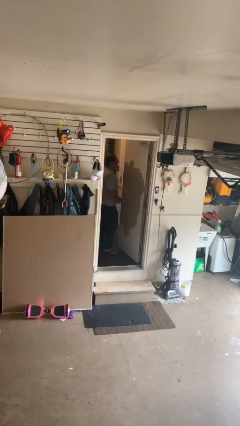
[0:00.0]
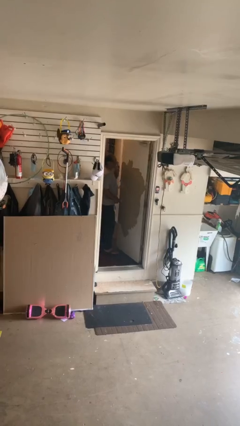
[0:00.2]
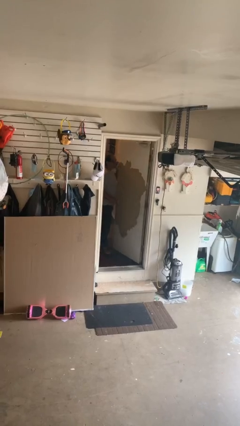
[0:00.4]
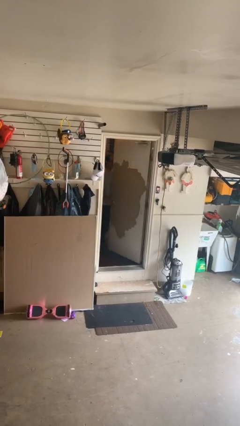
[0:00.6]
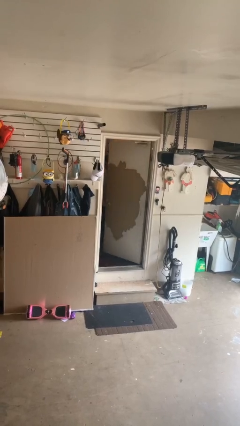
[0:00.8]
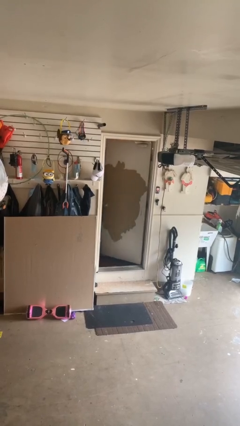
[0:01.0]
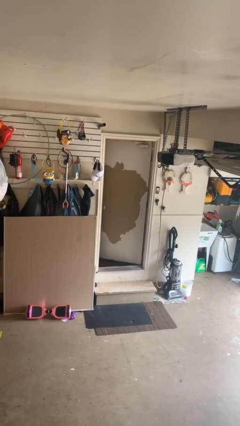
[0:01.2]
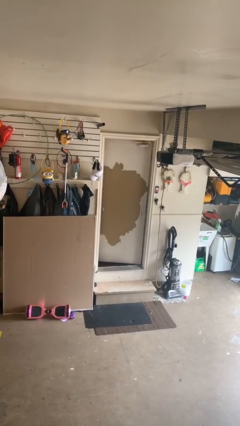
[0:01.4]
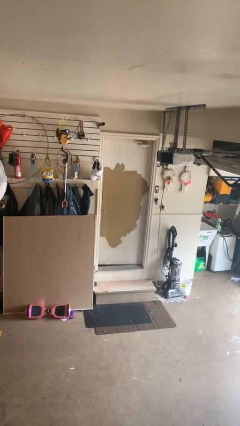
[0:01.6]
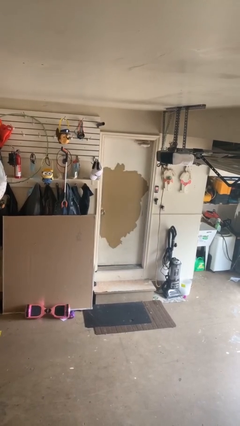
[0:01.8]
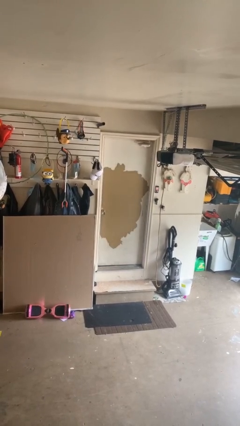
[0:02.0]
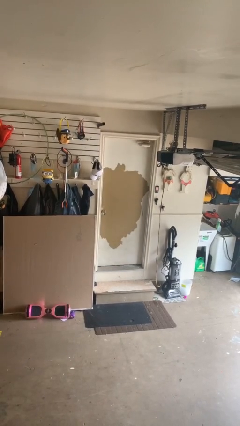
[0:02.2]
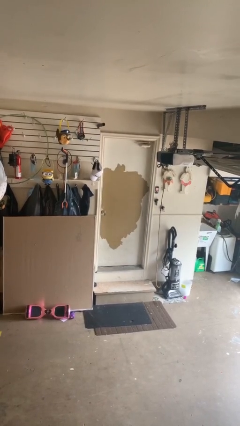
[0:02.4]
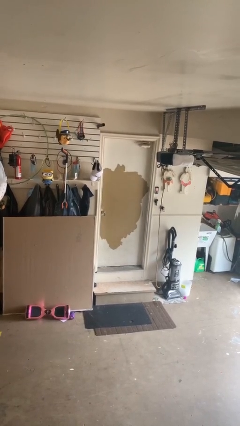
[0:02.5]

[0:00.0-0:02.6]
person closes facility door

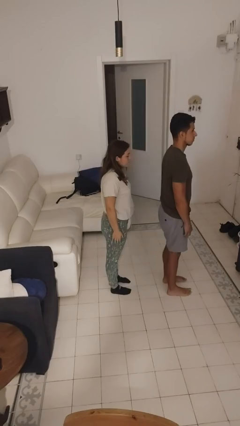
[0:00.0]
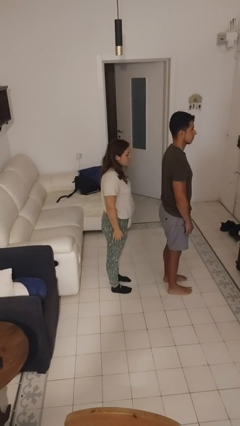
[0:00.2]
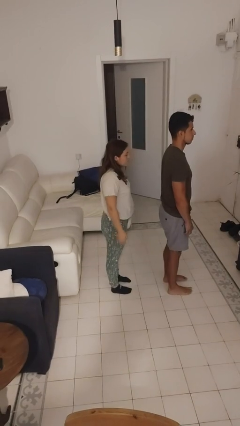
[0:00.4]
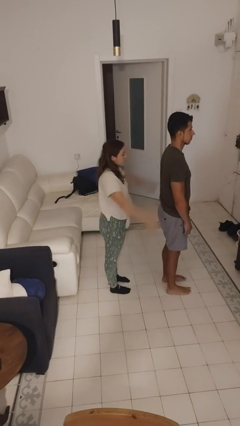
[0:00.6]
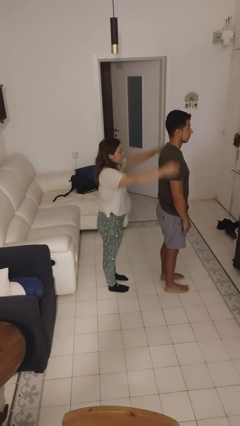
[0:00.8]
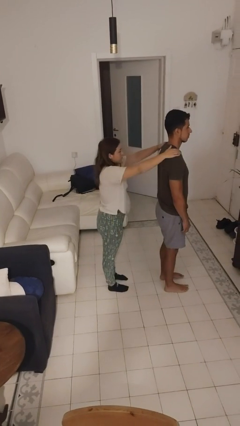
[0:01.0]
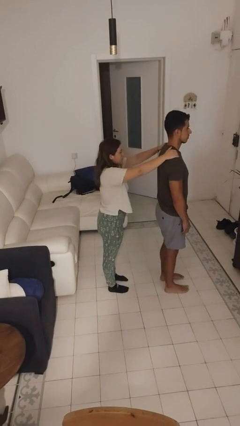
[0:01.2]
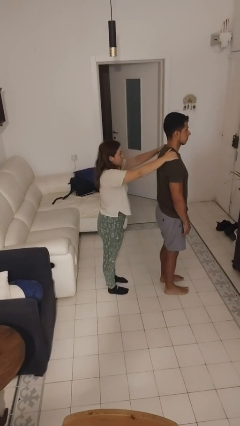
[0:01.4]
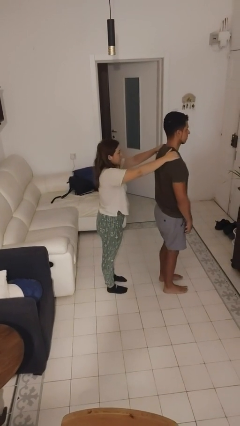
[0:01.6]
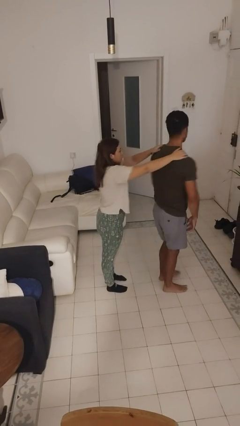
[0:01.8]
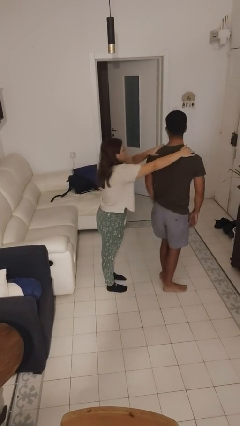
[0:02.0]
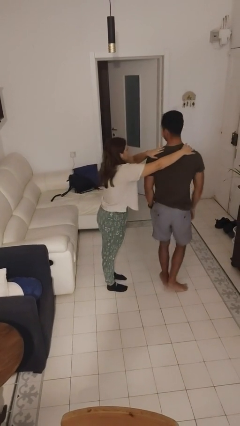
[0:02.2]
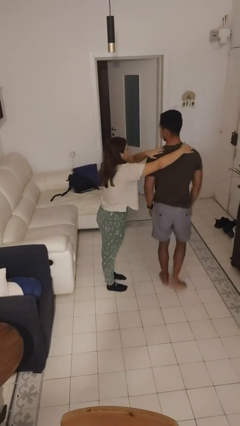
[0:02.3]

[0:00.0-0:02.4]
person grabs person by shoulder

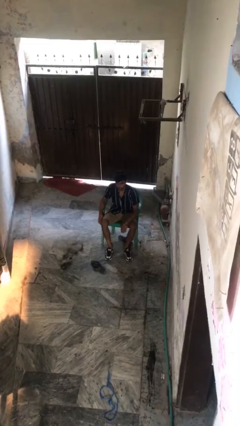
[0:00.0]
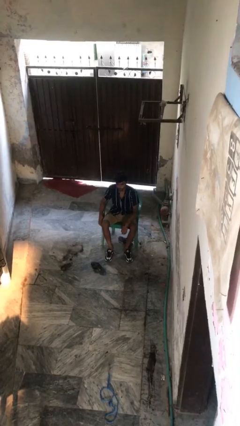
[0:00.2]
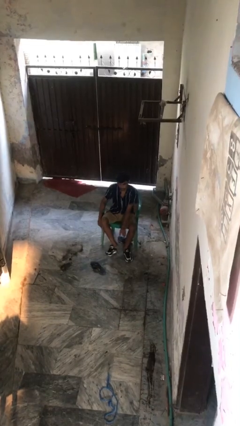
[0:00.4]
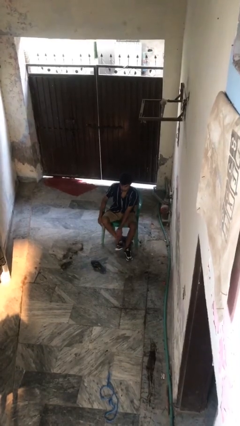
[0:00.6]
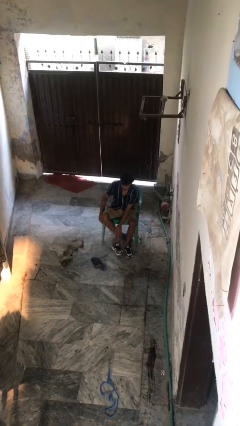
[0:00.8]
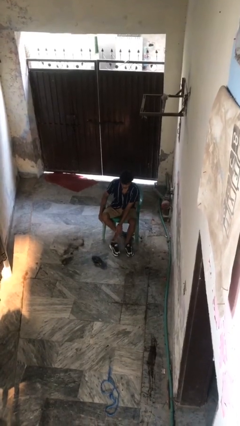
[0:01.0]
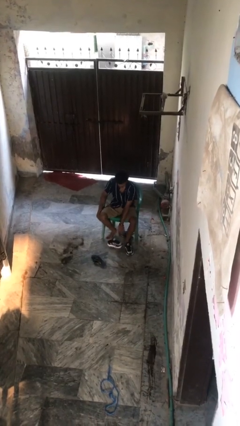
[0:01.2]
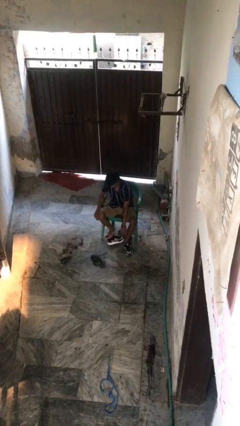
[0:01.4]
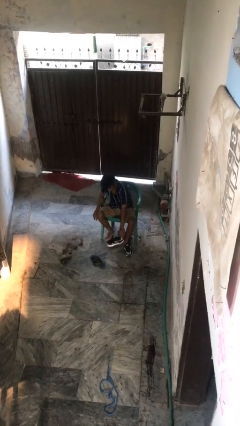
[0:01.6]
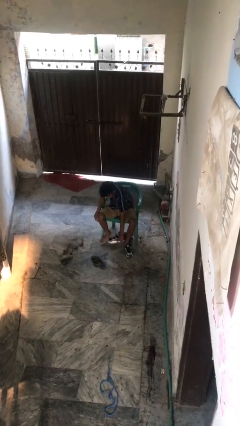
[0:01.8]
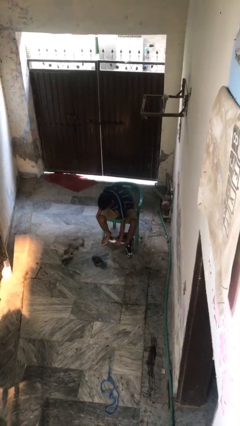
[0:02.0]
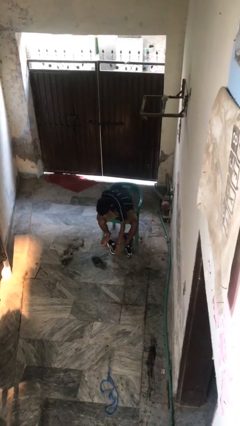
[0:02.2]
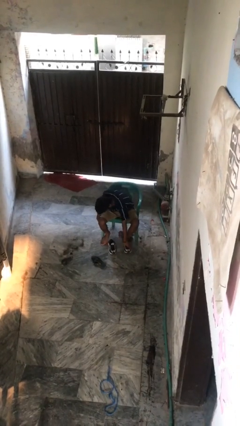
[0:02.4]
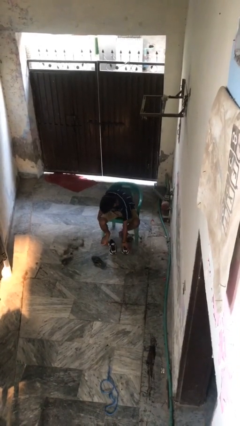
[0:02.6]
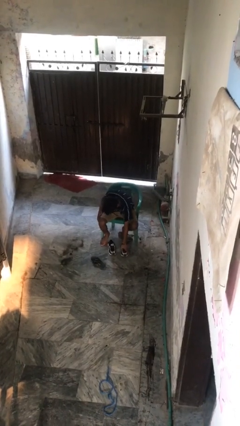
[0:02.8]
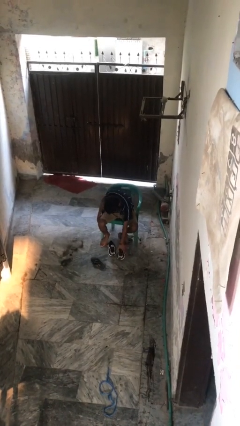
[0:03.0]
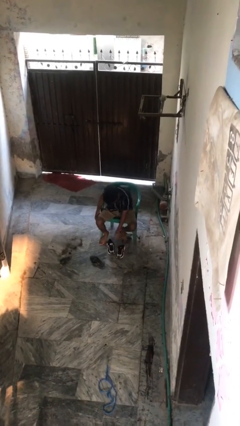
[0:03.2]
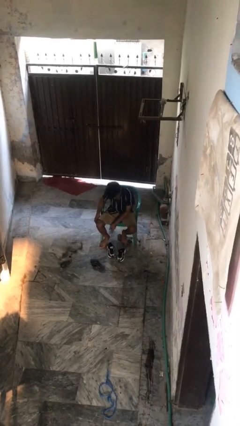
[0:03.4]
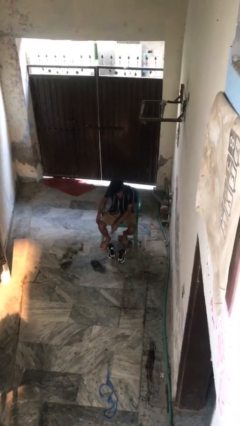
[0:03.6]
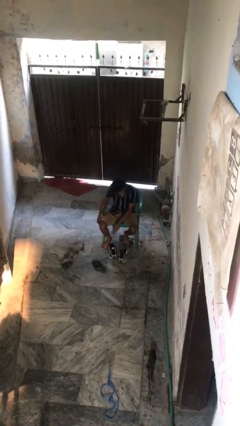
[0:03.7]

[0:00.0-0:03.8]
person takes off shoes

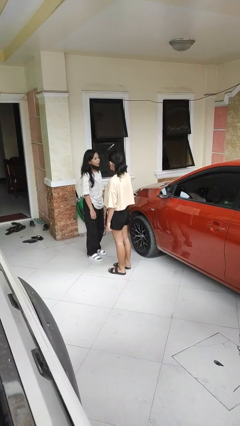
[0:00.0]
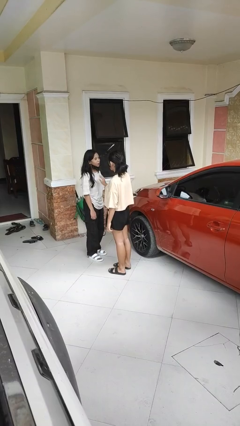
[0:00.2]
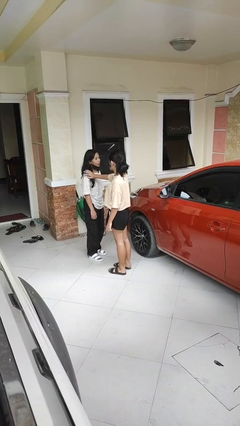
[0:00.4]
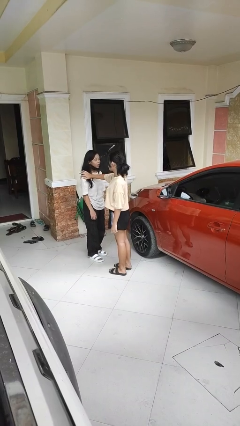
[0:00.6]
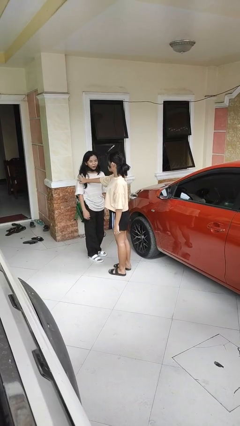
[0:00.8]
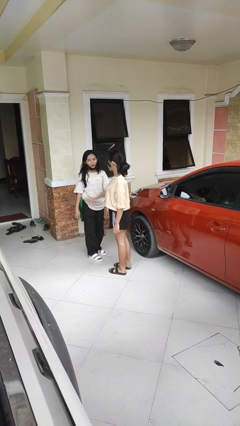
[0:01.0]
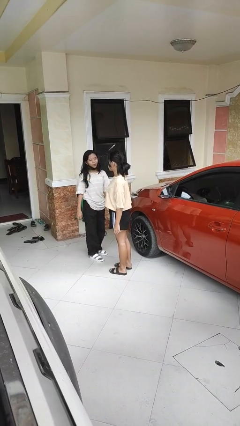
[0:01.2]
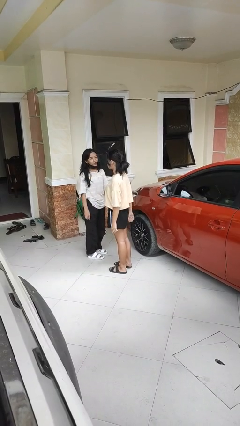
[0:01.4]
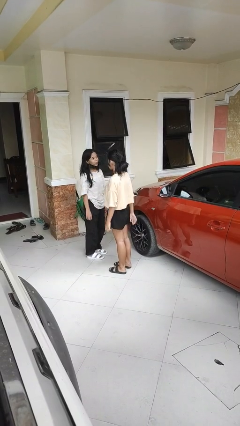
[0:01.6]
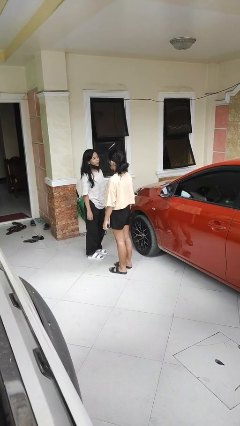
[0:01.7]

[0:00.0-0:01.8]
person shoves person

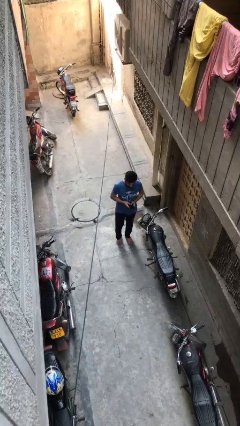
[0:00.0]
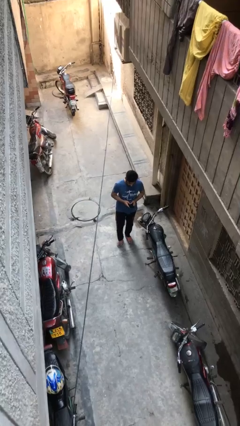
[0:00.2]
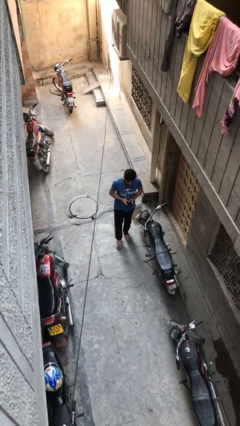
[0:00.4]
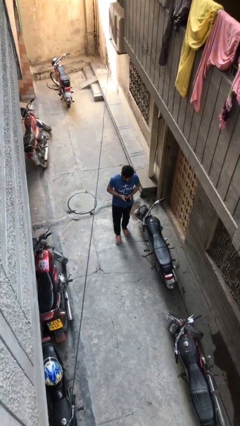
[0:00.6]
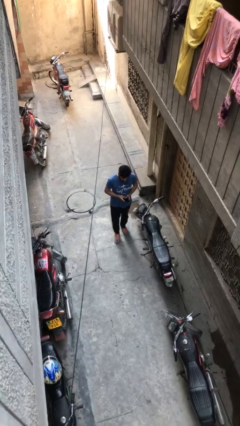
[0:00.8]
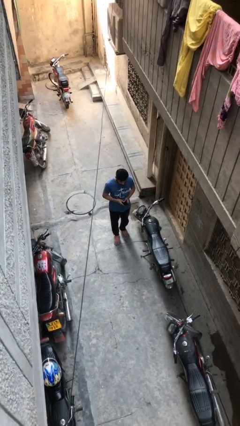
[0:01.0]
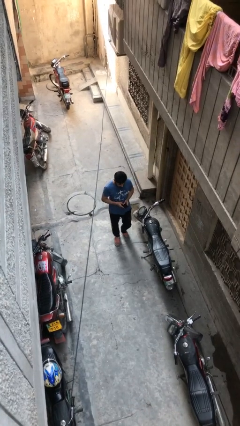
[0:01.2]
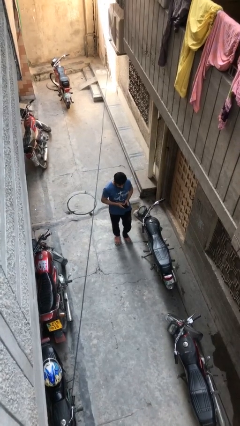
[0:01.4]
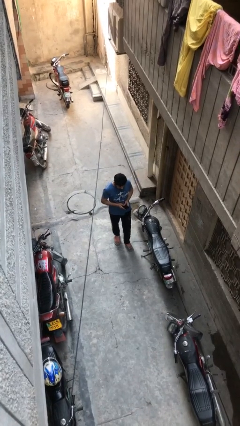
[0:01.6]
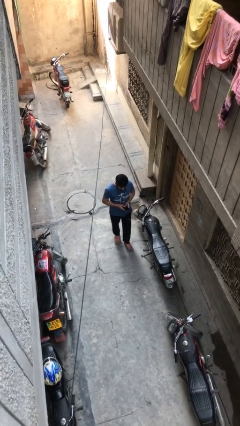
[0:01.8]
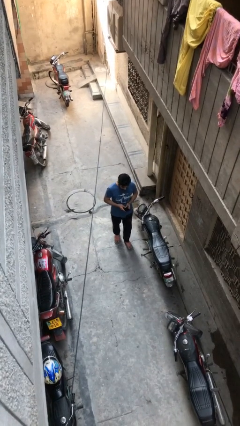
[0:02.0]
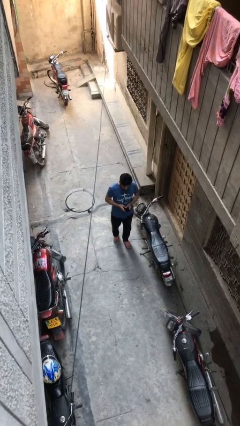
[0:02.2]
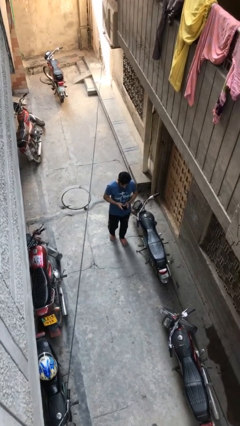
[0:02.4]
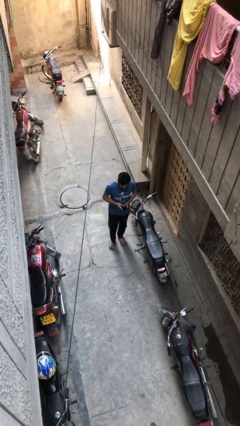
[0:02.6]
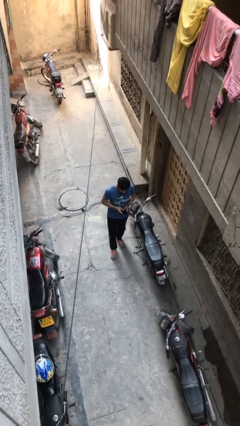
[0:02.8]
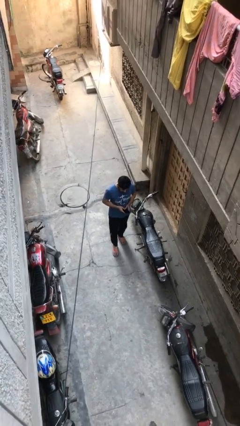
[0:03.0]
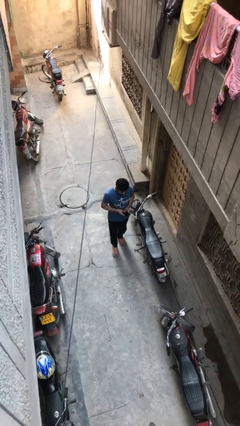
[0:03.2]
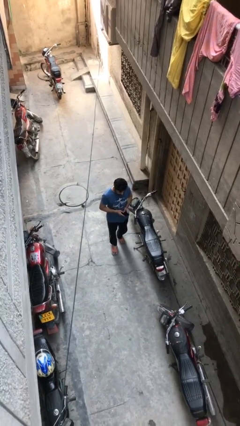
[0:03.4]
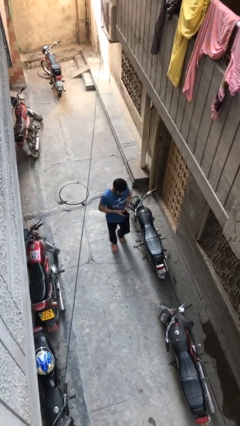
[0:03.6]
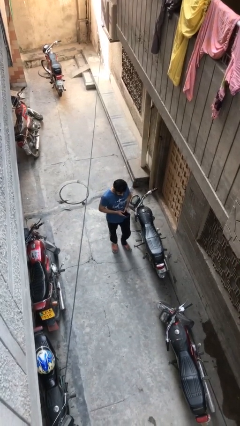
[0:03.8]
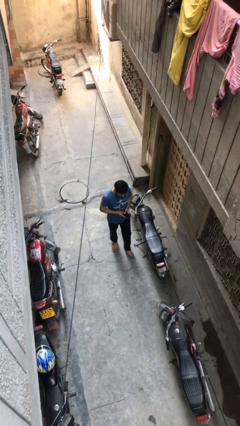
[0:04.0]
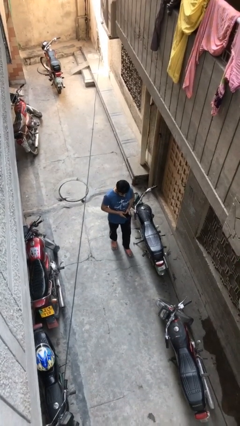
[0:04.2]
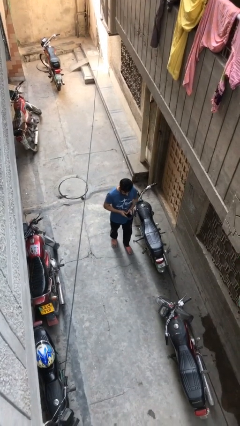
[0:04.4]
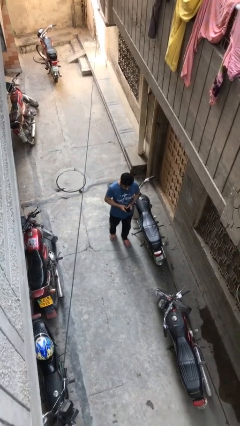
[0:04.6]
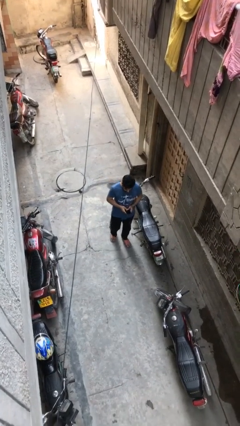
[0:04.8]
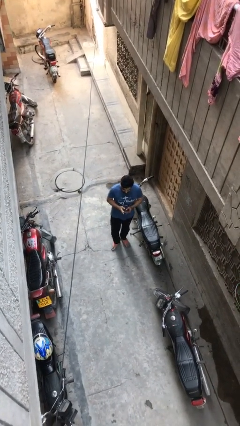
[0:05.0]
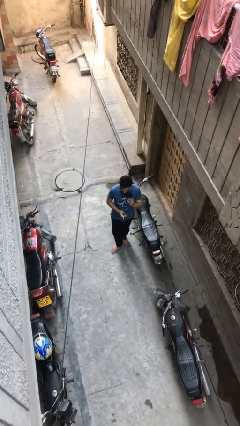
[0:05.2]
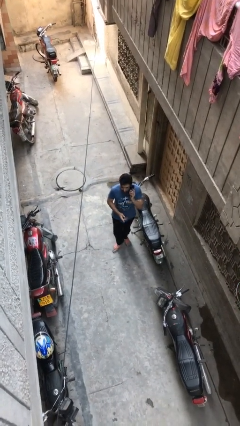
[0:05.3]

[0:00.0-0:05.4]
person texts on phone

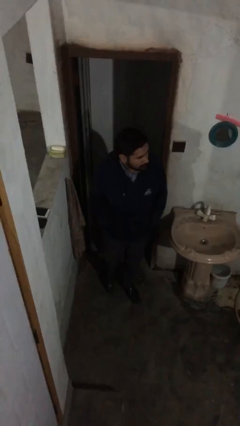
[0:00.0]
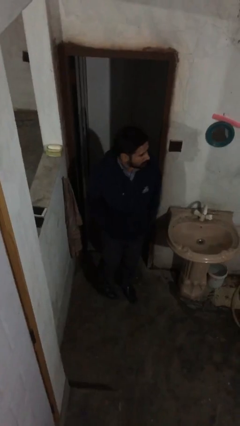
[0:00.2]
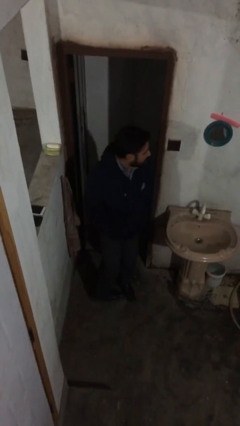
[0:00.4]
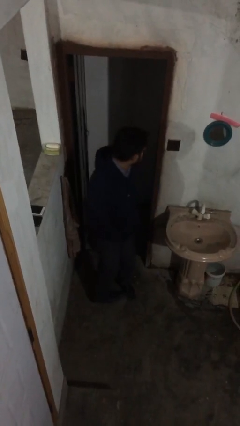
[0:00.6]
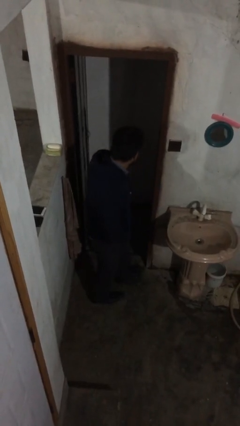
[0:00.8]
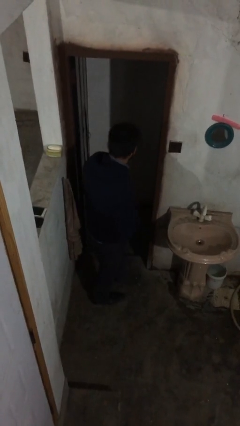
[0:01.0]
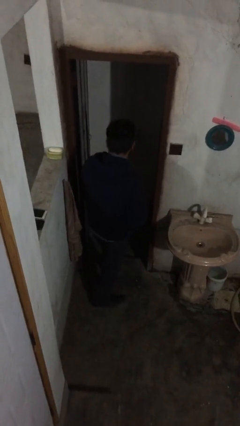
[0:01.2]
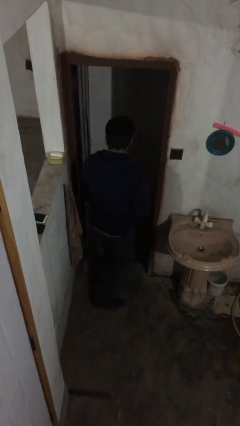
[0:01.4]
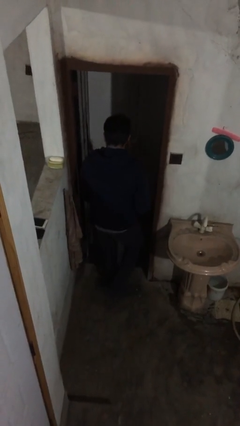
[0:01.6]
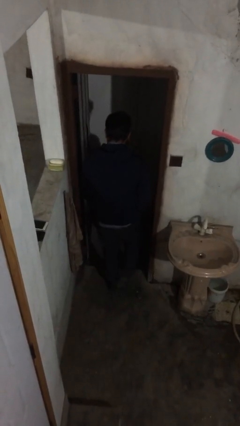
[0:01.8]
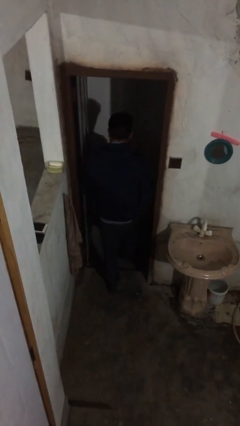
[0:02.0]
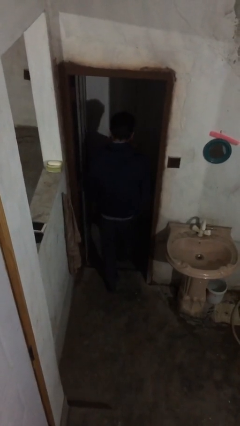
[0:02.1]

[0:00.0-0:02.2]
person exits scene through structure
